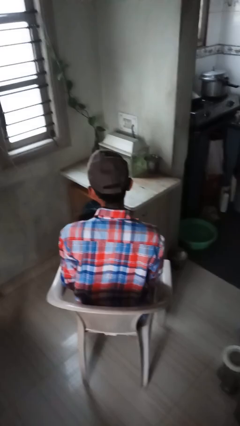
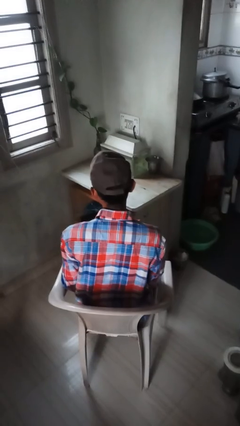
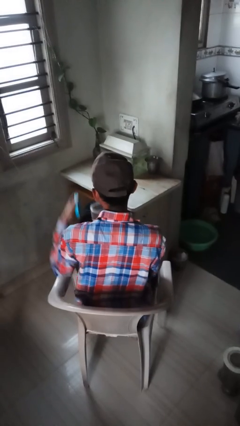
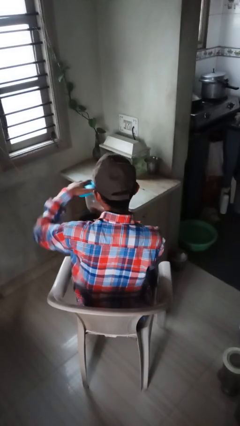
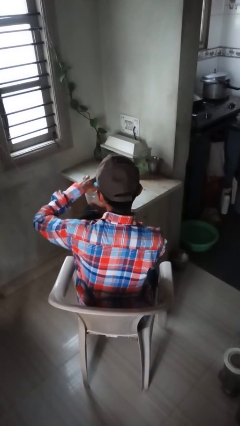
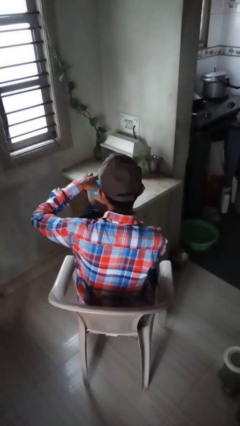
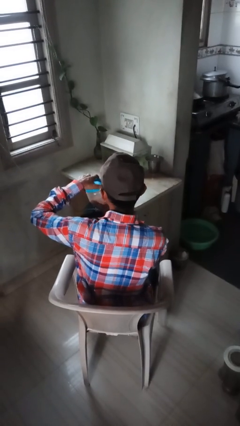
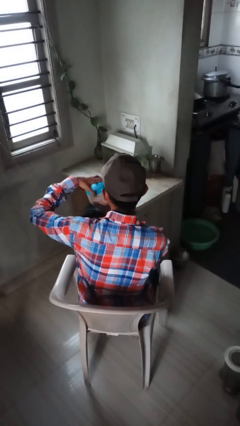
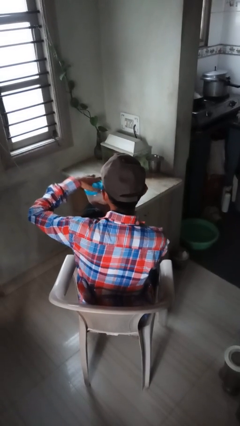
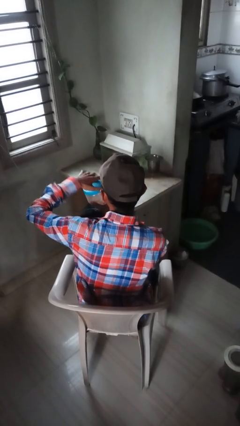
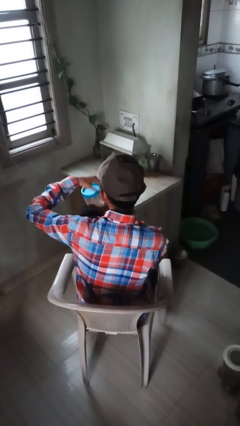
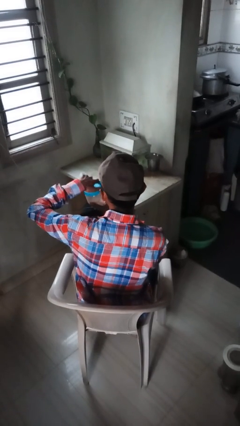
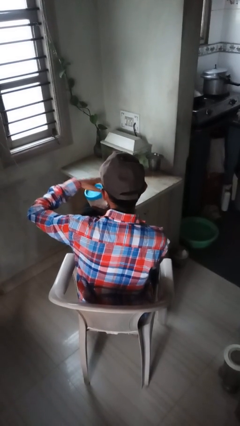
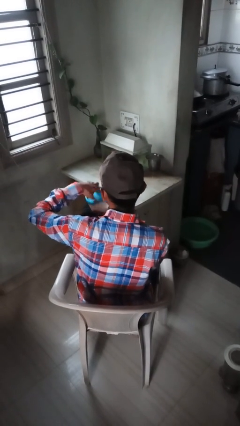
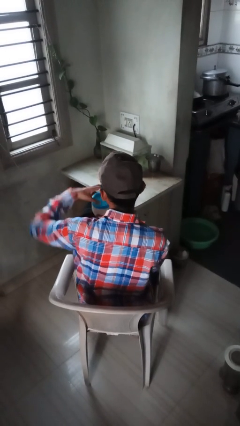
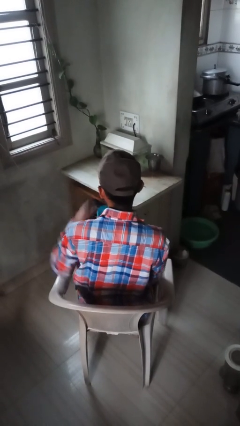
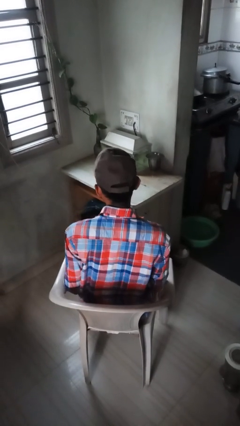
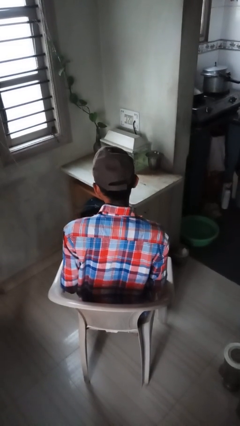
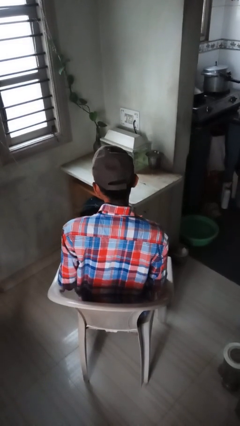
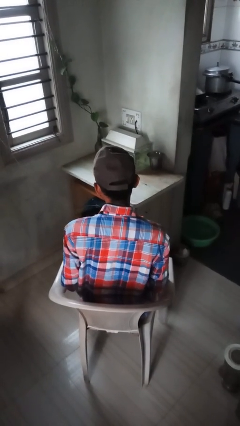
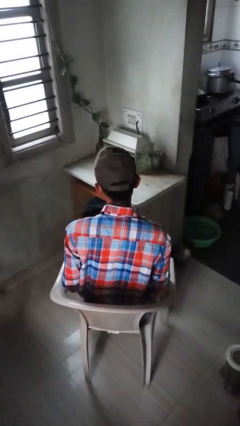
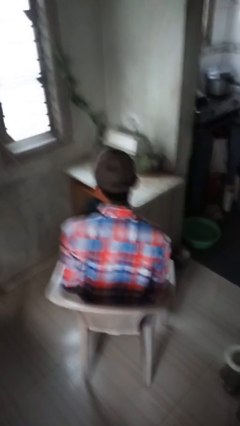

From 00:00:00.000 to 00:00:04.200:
person closes jar

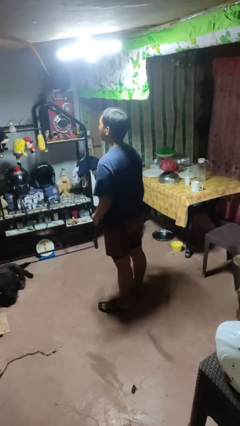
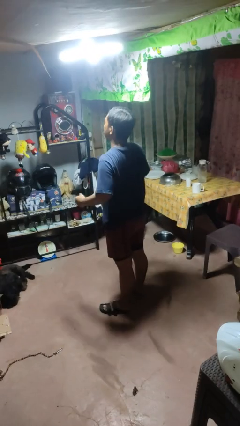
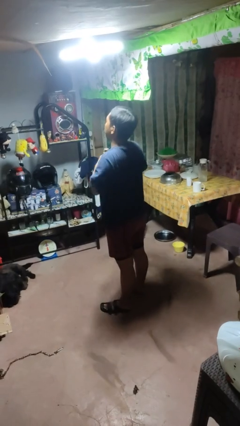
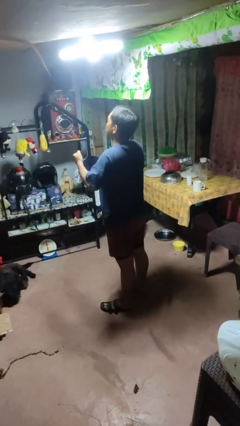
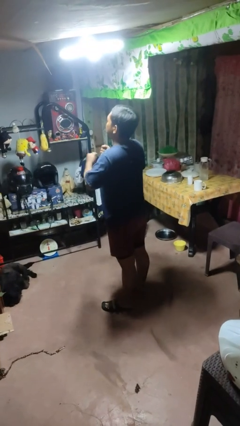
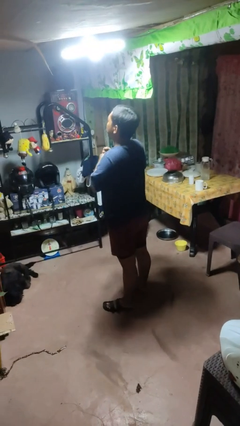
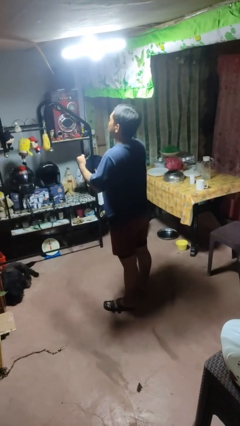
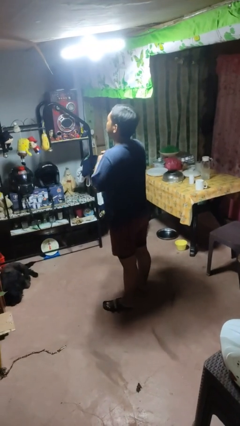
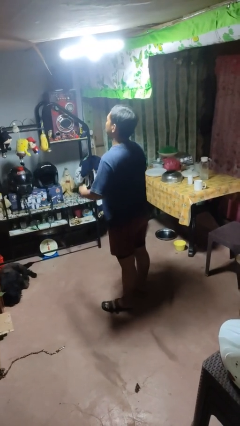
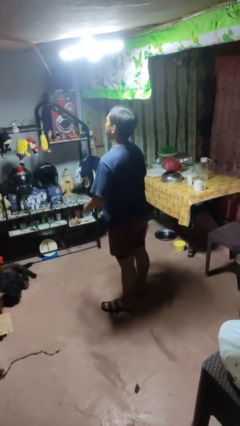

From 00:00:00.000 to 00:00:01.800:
person drums on chest

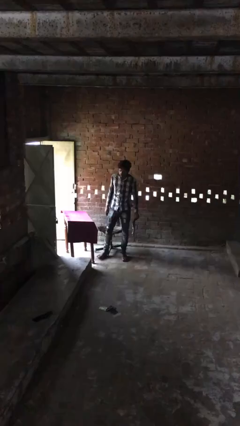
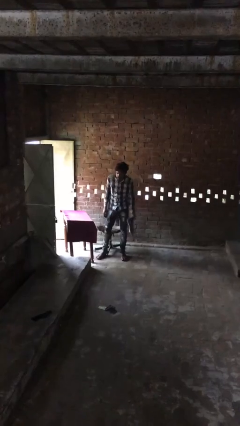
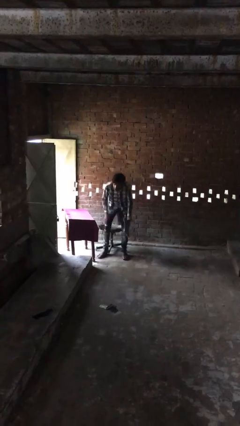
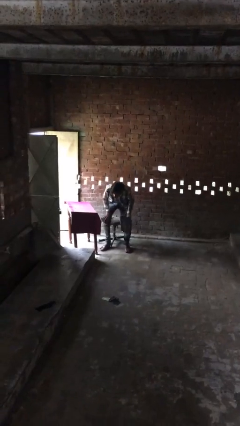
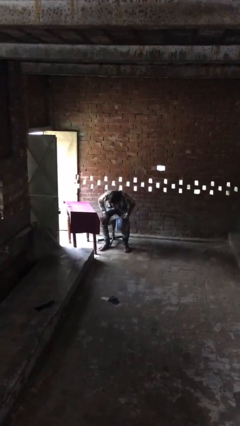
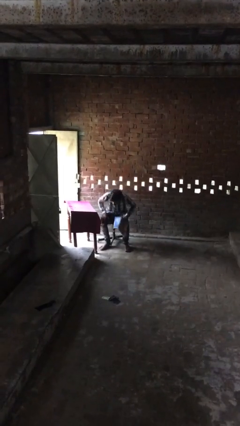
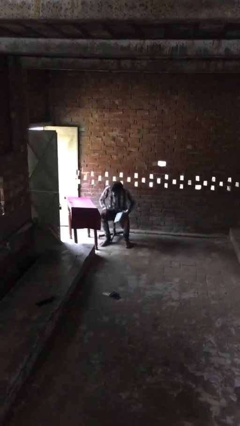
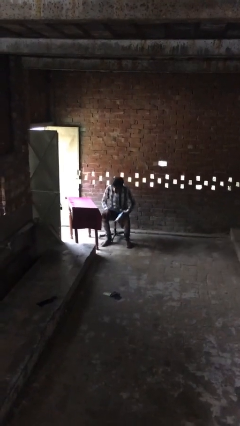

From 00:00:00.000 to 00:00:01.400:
person sits down

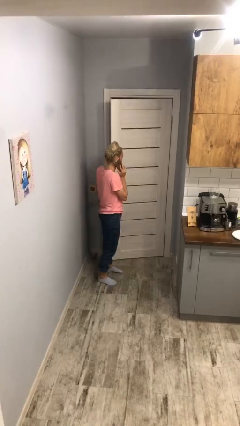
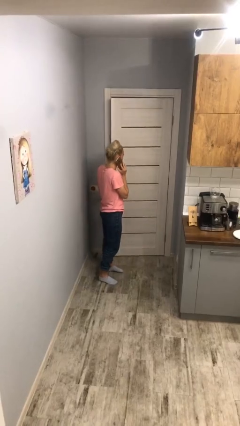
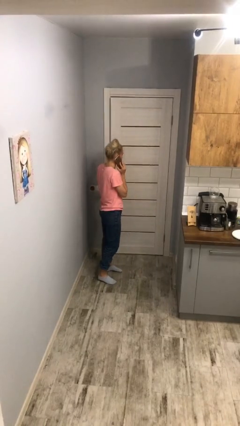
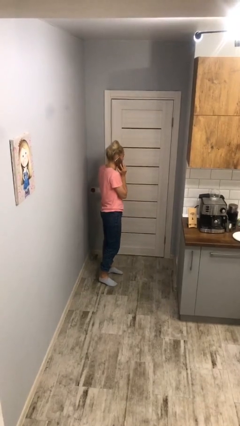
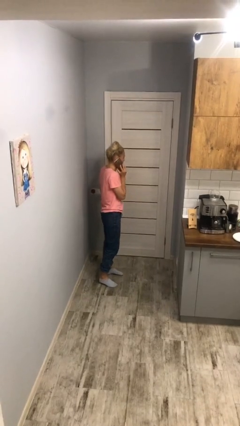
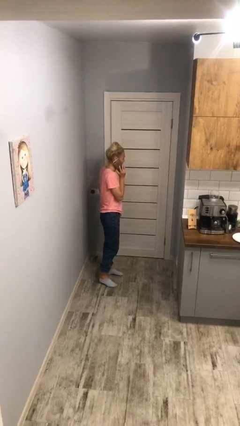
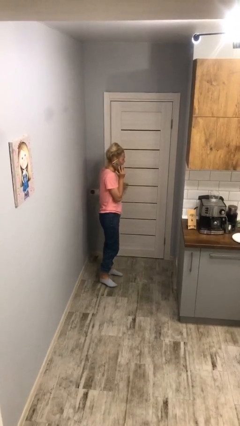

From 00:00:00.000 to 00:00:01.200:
person closes facility door

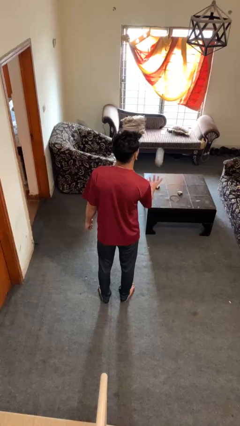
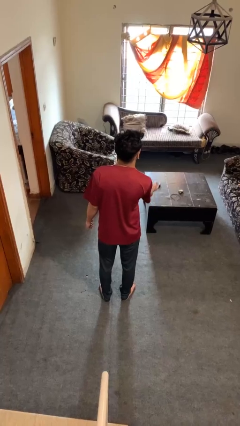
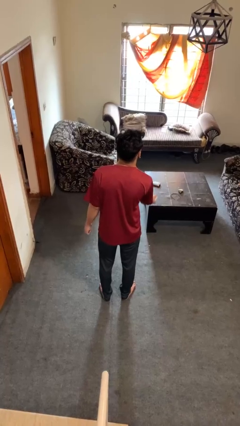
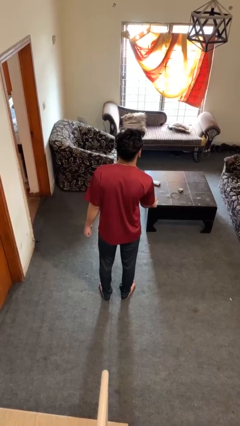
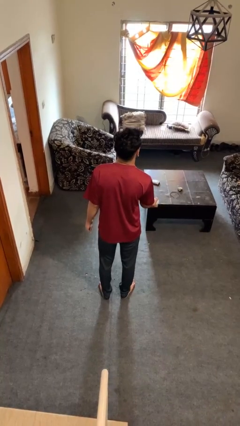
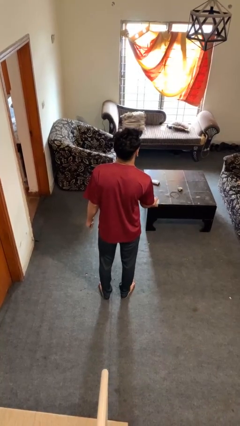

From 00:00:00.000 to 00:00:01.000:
person catches dropped object

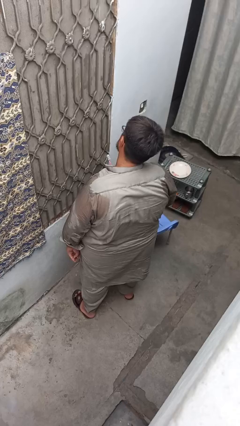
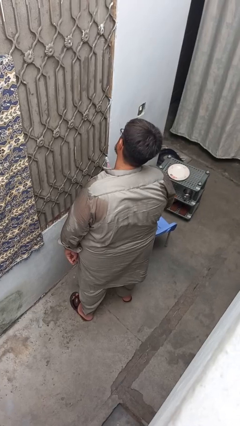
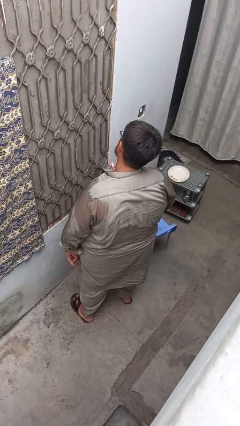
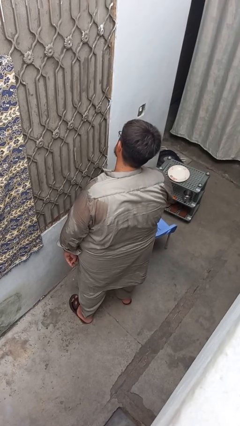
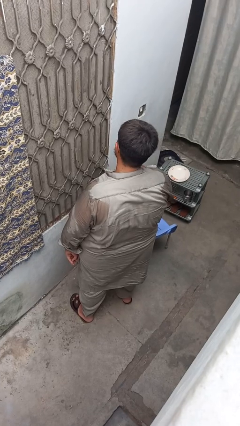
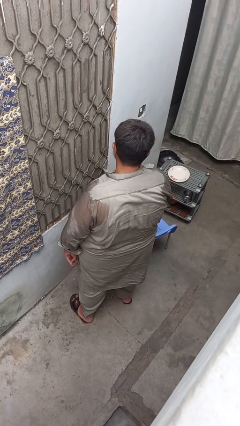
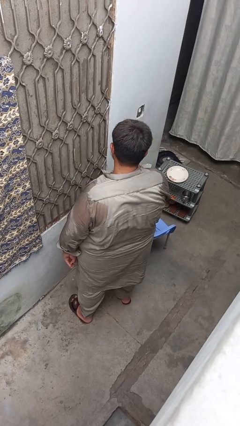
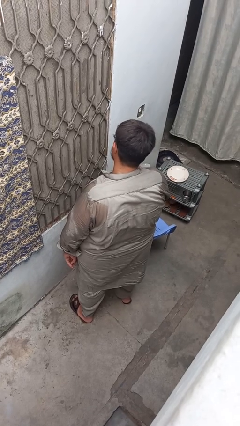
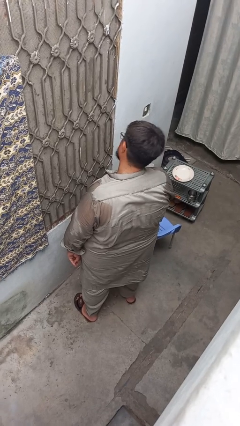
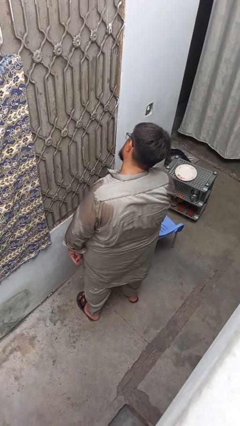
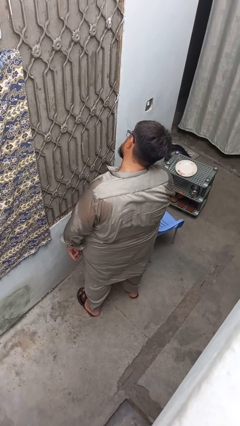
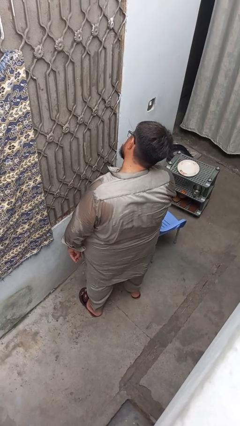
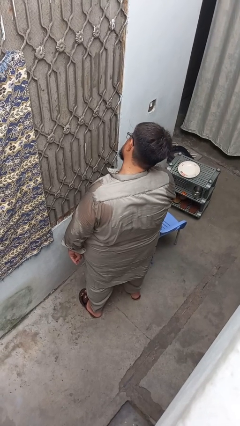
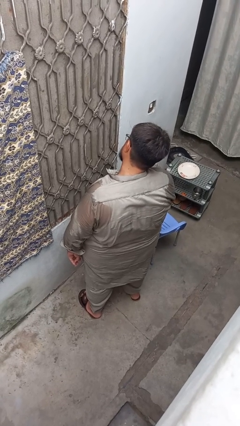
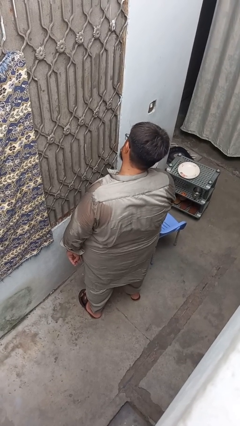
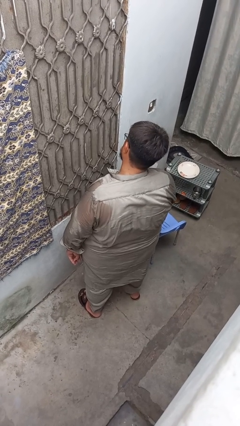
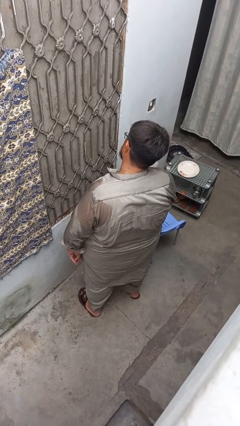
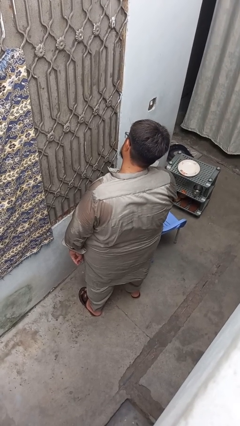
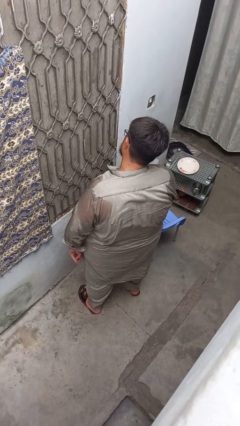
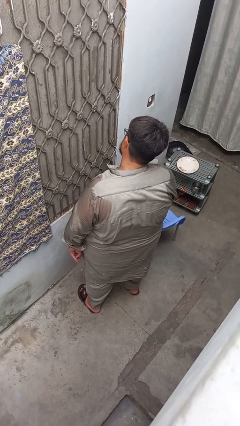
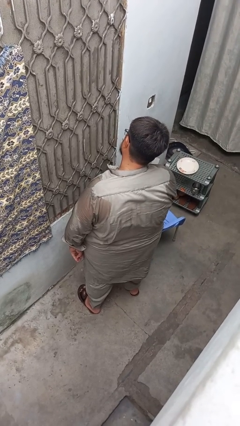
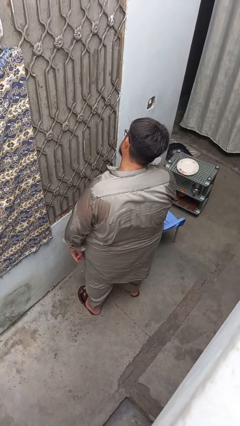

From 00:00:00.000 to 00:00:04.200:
person brushes teeth

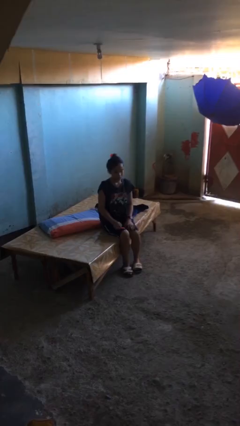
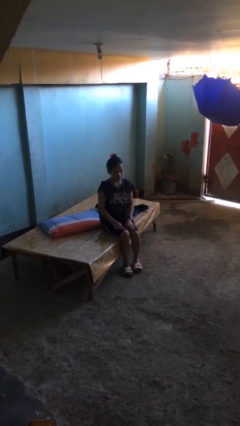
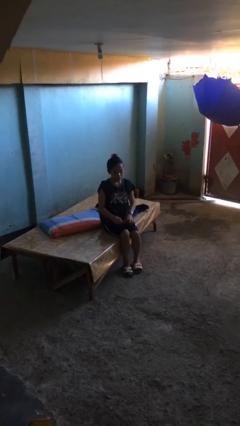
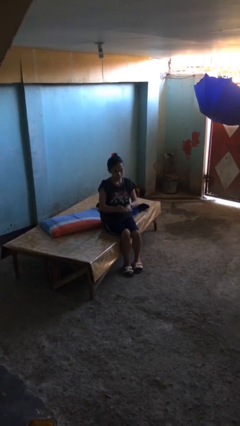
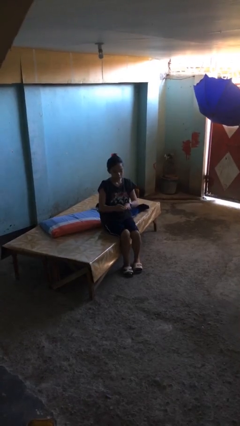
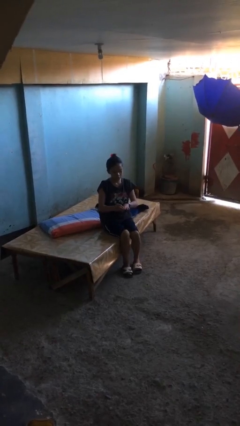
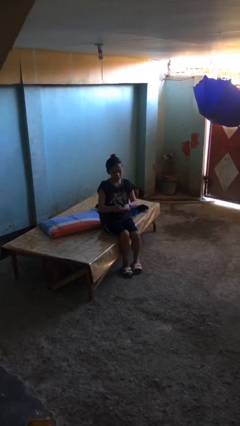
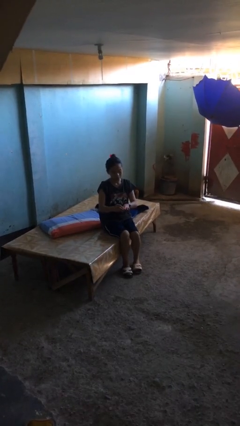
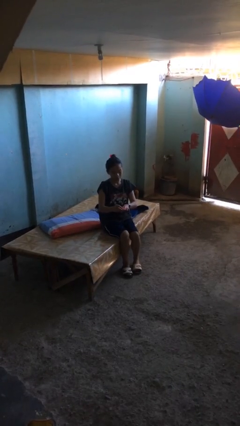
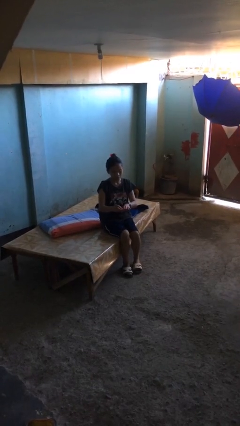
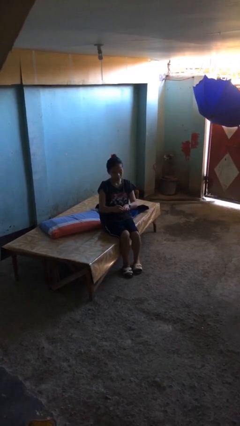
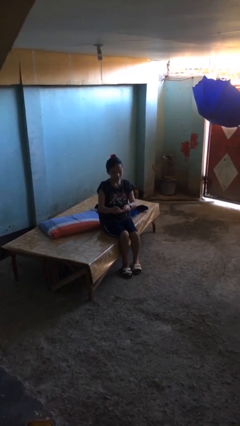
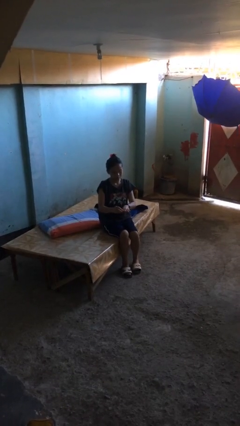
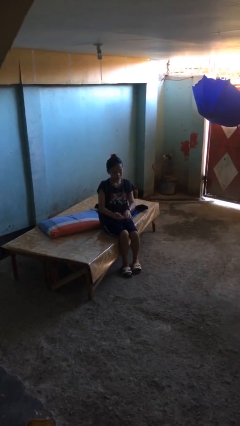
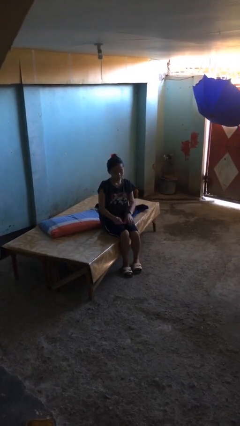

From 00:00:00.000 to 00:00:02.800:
person files fingernails

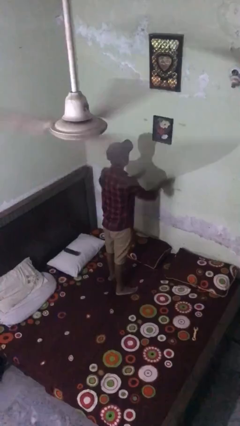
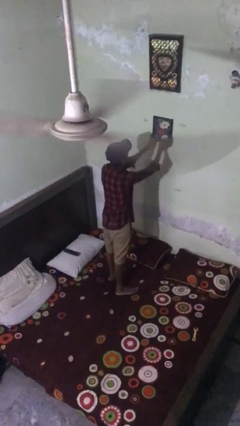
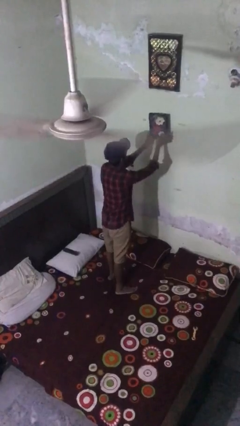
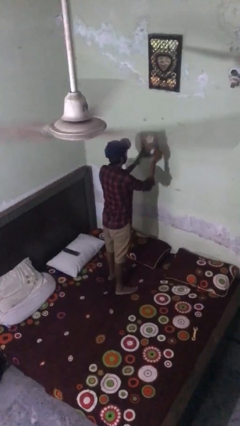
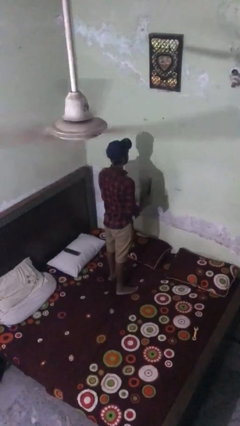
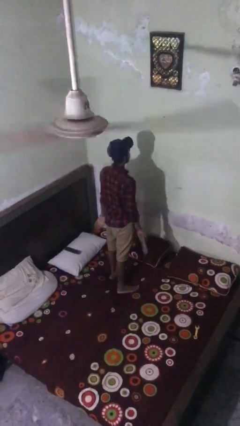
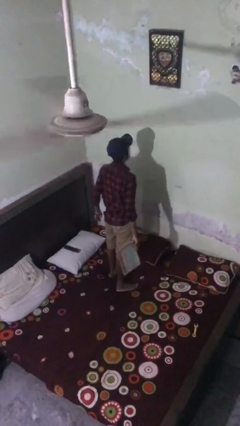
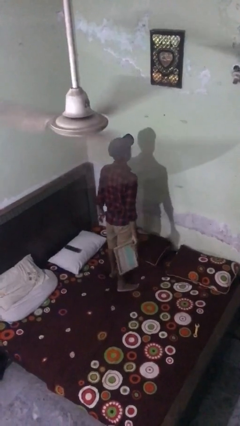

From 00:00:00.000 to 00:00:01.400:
person takes down picture frame
